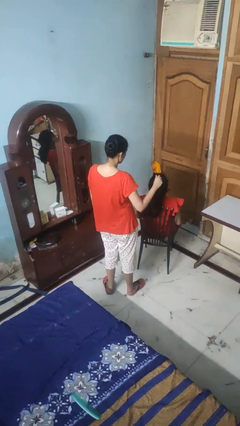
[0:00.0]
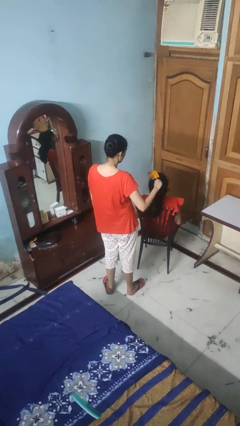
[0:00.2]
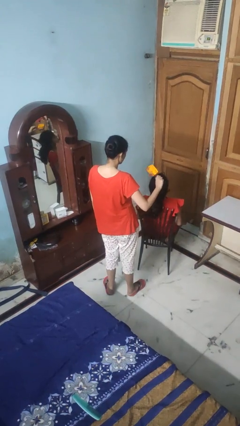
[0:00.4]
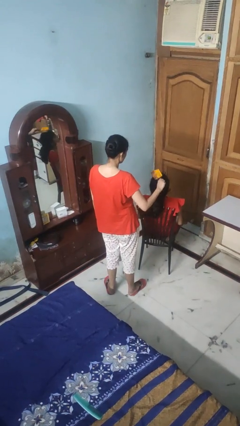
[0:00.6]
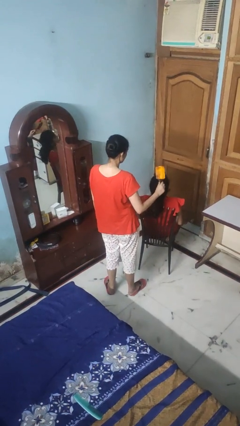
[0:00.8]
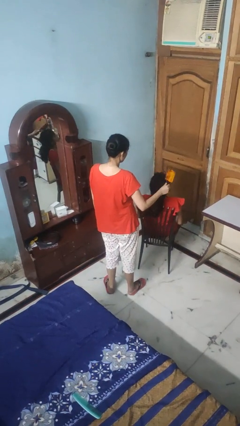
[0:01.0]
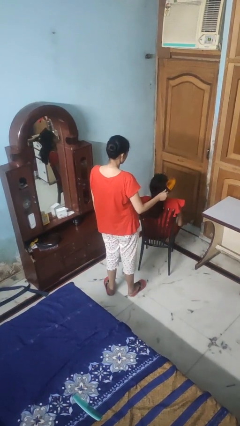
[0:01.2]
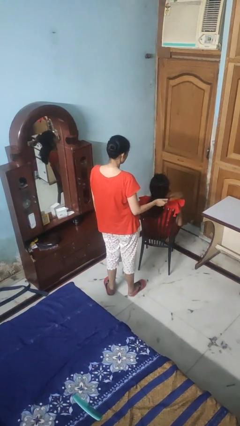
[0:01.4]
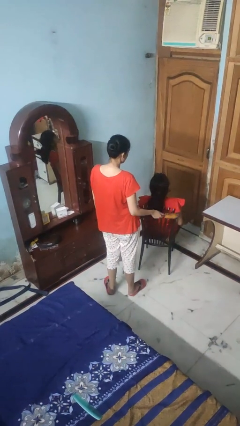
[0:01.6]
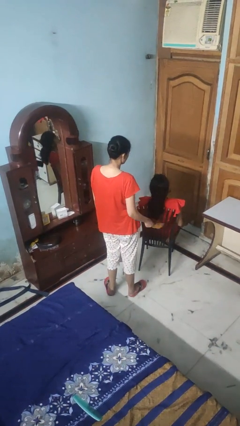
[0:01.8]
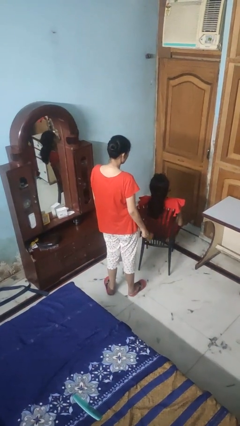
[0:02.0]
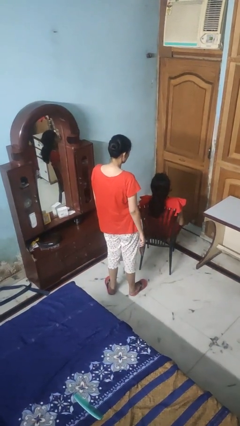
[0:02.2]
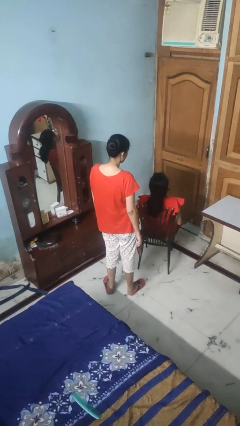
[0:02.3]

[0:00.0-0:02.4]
person brushes hair of person

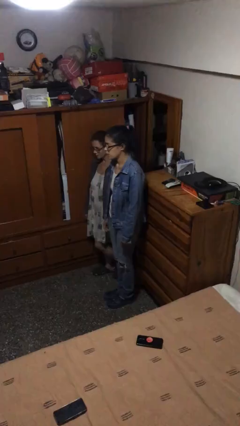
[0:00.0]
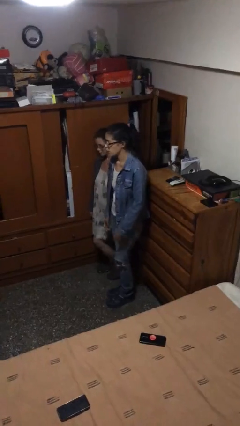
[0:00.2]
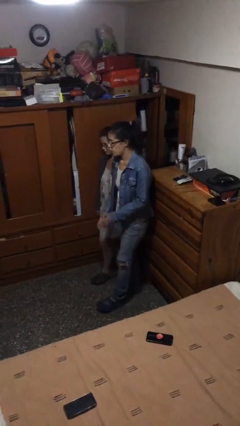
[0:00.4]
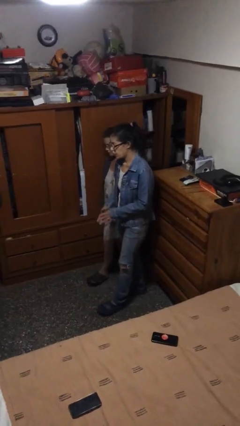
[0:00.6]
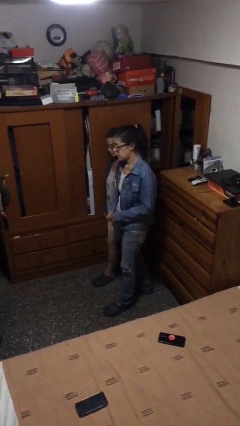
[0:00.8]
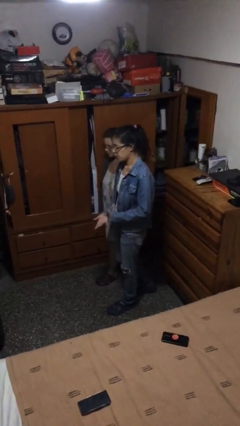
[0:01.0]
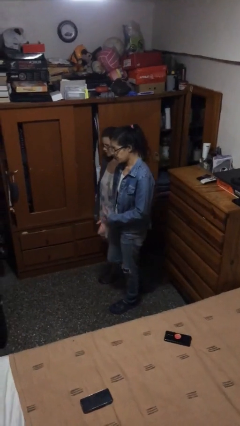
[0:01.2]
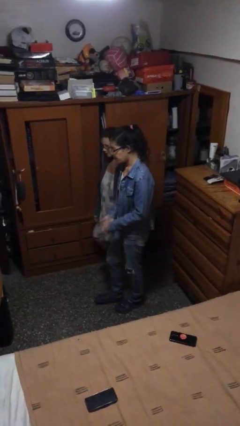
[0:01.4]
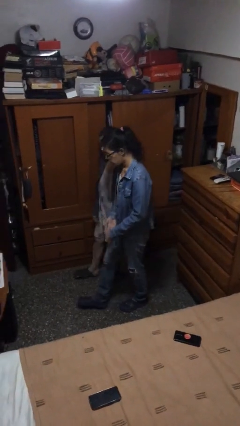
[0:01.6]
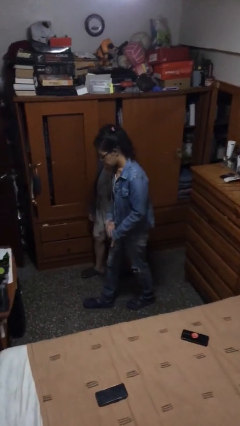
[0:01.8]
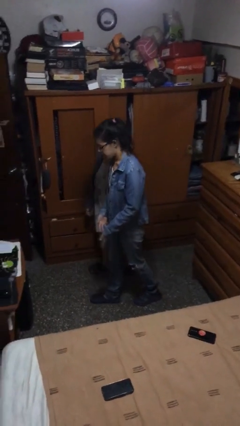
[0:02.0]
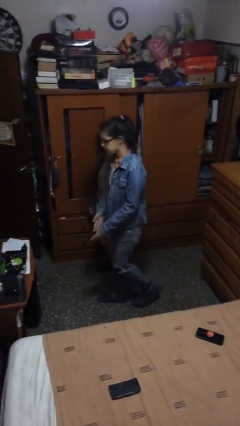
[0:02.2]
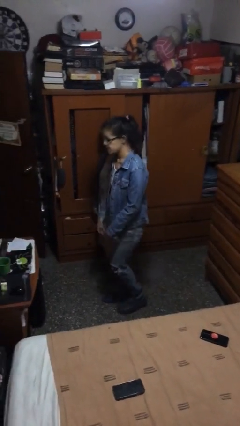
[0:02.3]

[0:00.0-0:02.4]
person talks to person

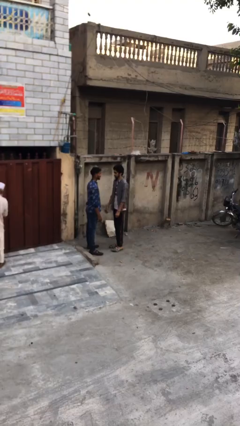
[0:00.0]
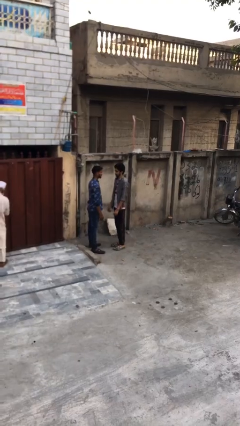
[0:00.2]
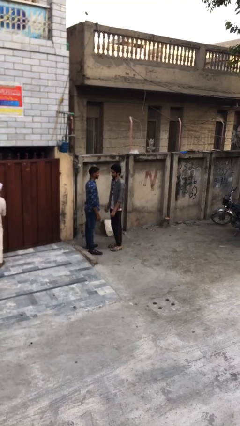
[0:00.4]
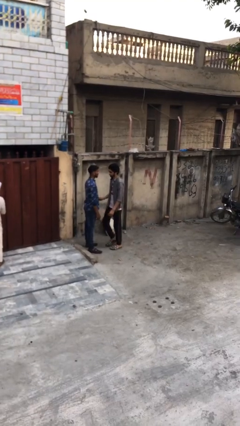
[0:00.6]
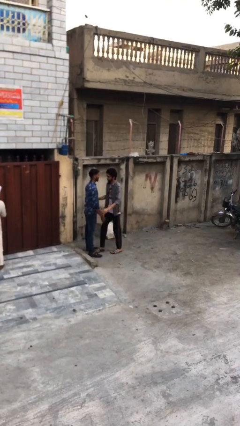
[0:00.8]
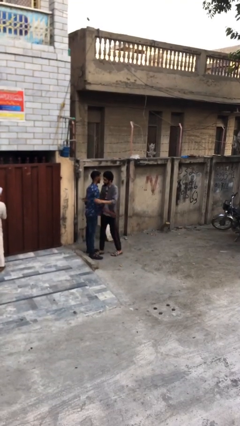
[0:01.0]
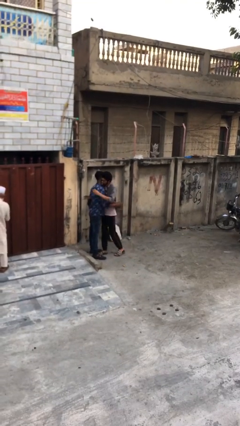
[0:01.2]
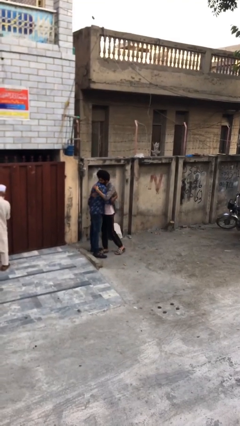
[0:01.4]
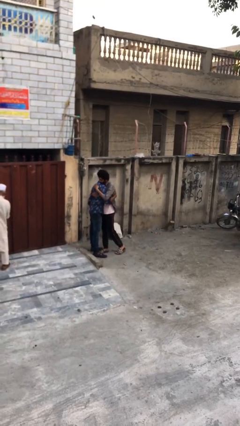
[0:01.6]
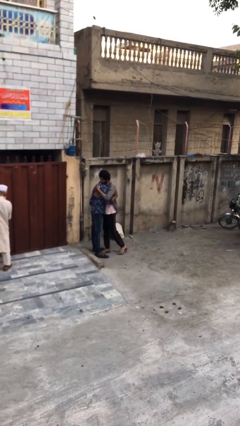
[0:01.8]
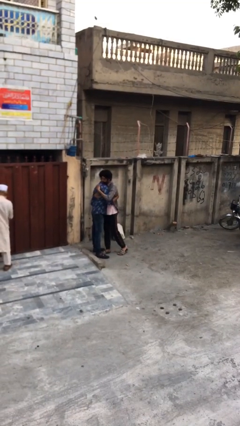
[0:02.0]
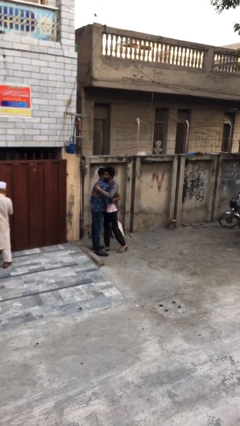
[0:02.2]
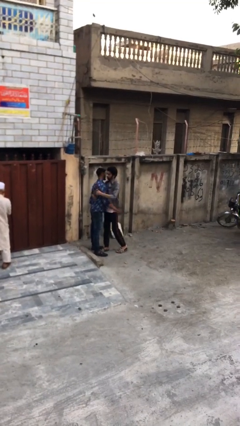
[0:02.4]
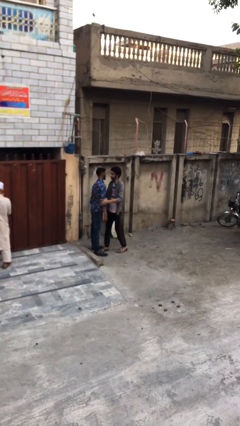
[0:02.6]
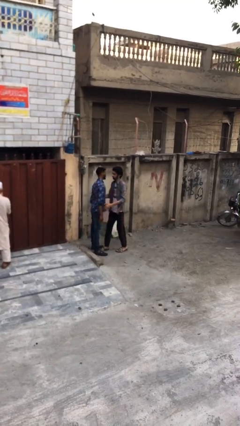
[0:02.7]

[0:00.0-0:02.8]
person embraces person

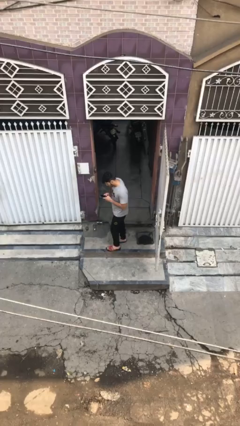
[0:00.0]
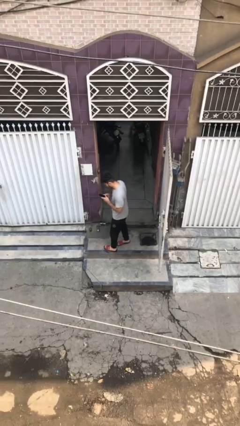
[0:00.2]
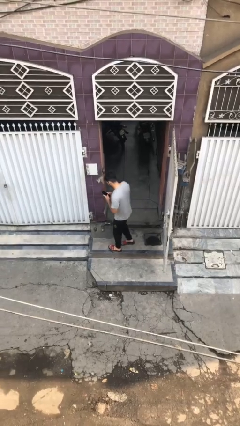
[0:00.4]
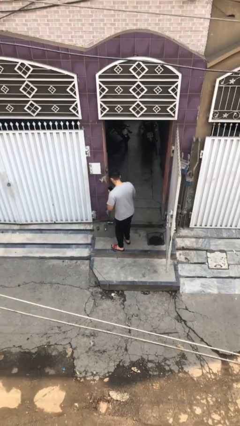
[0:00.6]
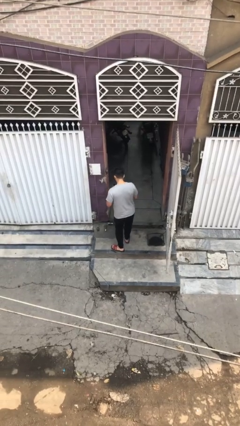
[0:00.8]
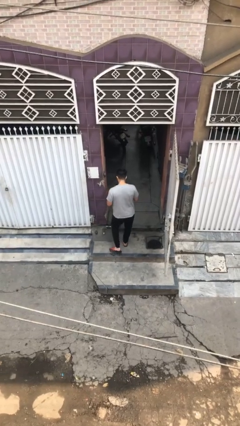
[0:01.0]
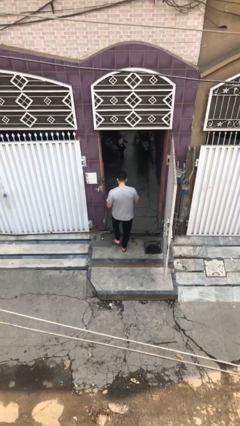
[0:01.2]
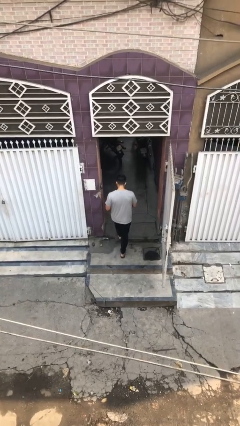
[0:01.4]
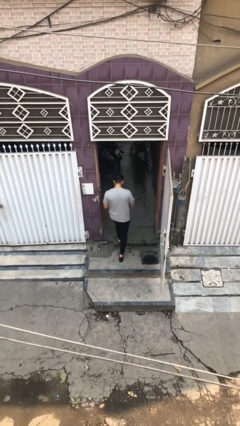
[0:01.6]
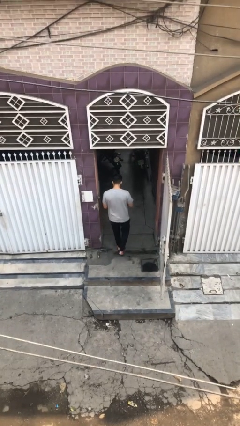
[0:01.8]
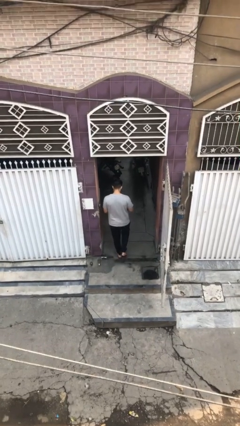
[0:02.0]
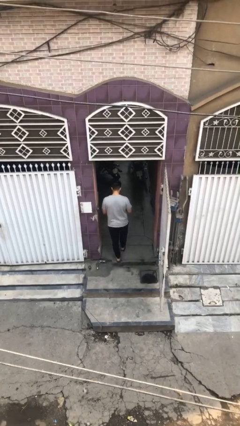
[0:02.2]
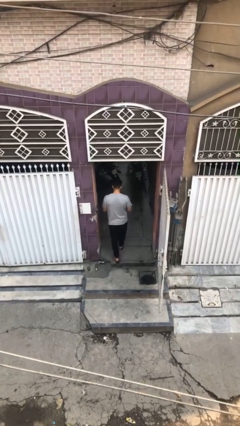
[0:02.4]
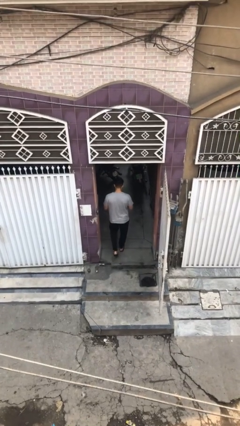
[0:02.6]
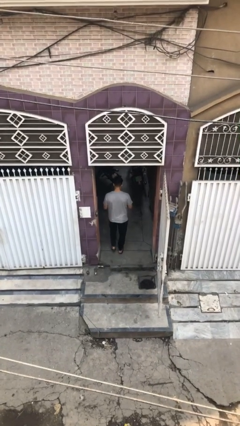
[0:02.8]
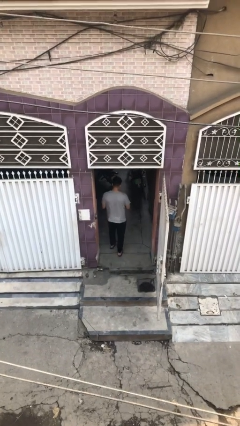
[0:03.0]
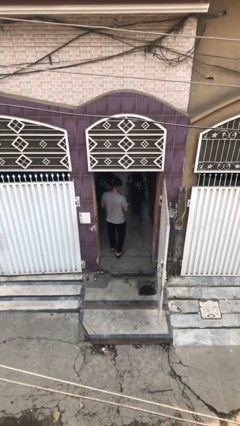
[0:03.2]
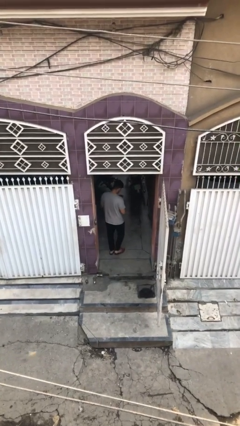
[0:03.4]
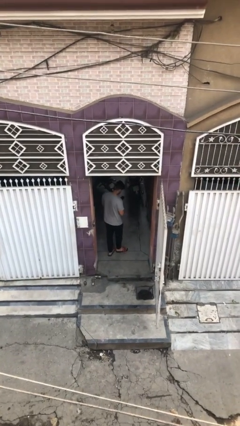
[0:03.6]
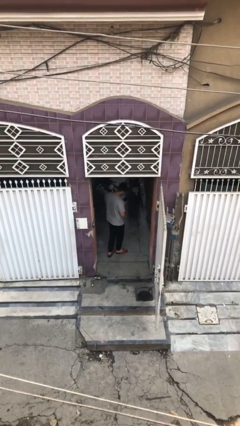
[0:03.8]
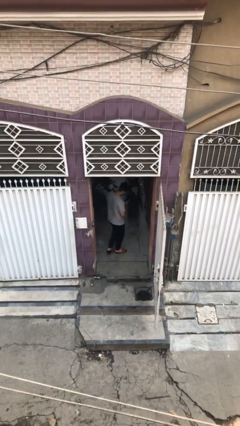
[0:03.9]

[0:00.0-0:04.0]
person exits scene through structure

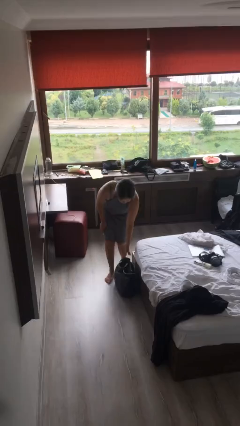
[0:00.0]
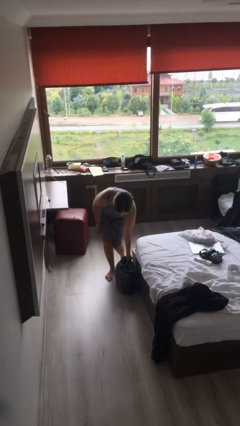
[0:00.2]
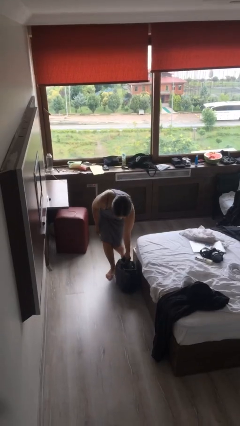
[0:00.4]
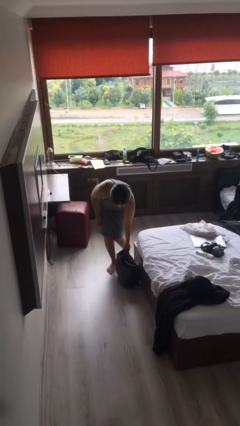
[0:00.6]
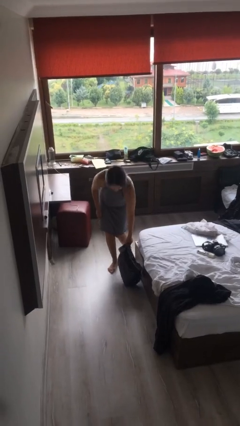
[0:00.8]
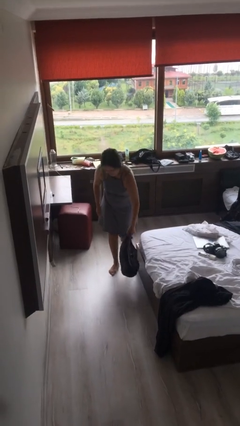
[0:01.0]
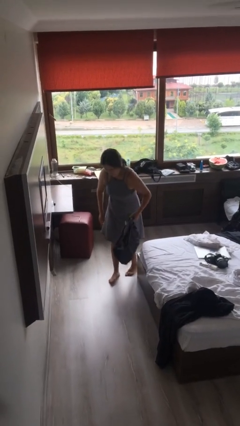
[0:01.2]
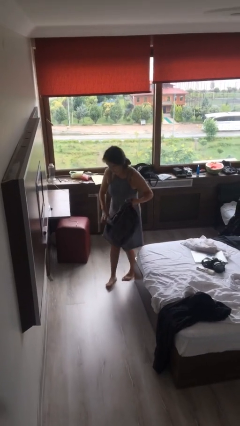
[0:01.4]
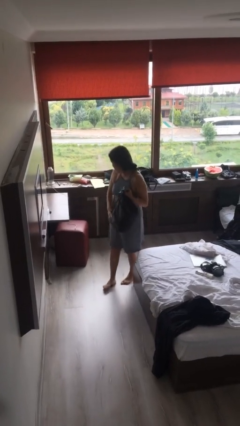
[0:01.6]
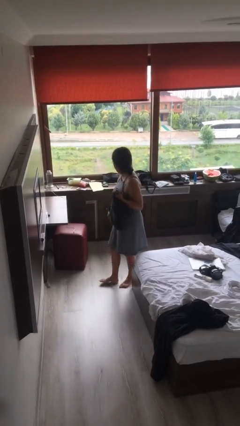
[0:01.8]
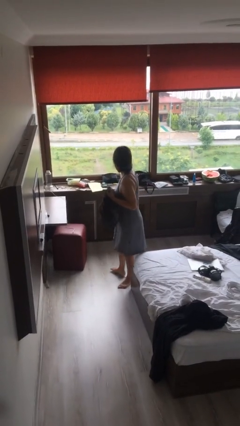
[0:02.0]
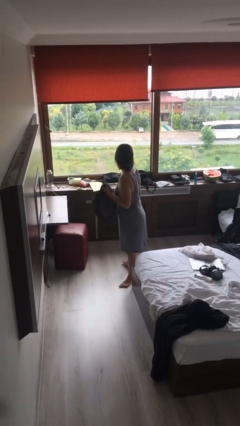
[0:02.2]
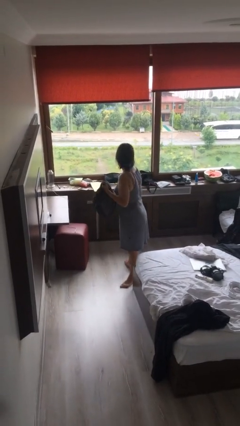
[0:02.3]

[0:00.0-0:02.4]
person picks up object from floor

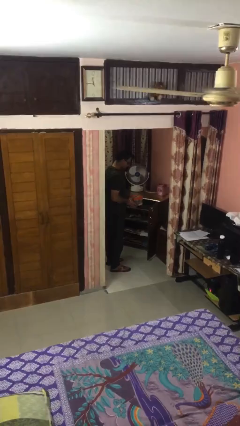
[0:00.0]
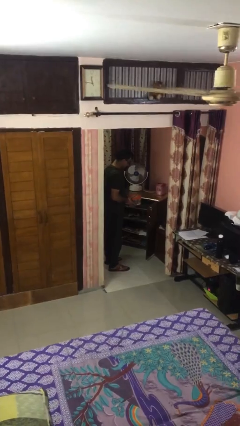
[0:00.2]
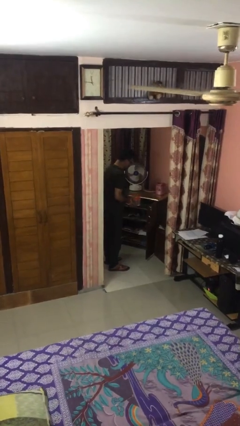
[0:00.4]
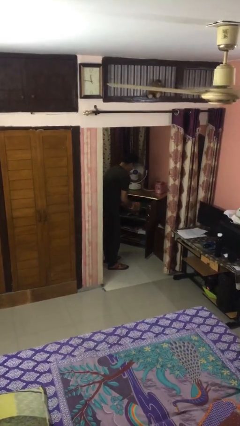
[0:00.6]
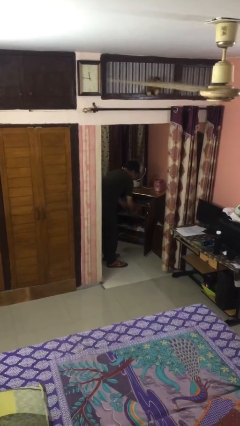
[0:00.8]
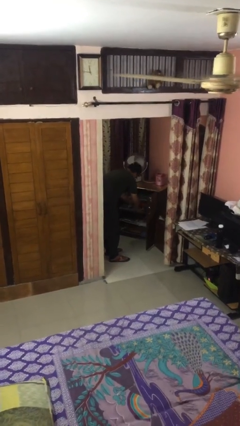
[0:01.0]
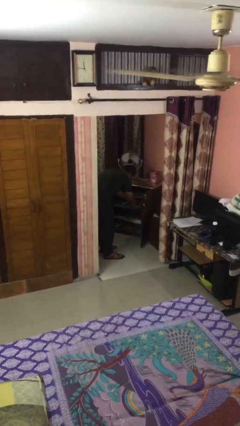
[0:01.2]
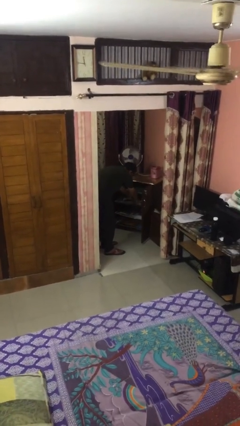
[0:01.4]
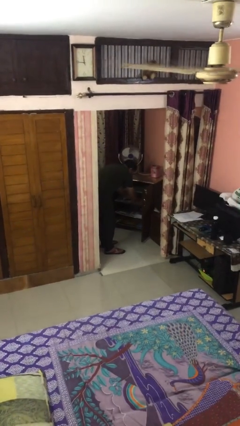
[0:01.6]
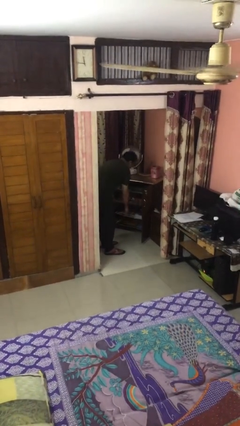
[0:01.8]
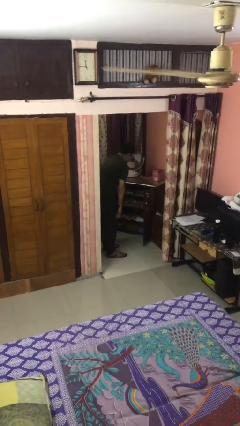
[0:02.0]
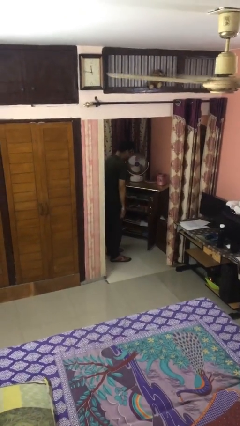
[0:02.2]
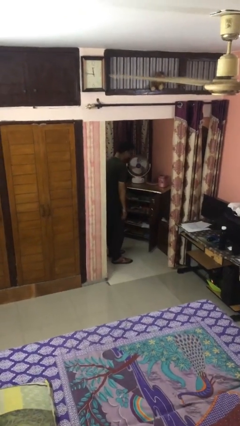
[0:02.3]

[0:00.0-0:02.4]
person puts down object into cabinet

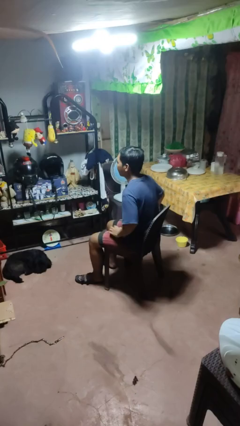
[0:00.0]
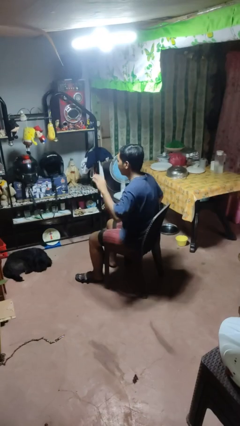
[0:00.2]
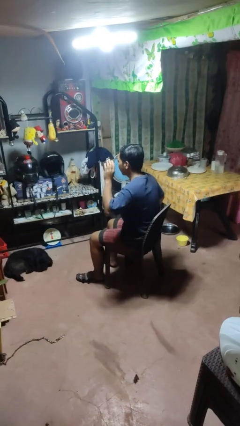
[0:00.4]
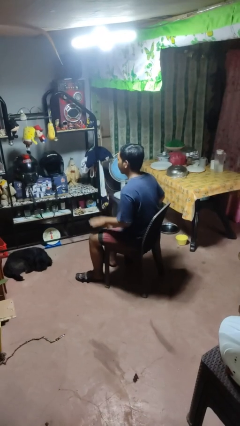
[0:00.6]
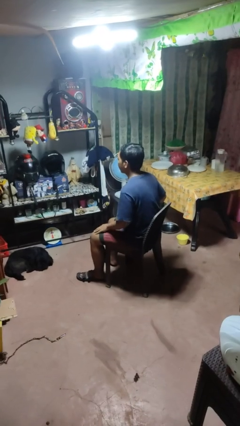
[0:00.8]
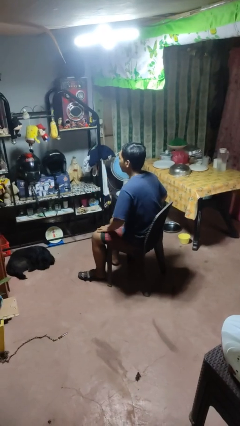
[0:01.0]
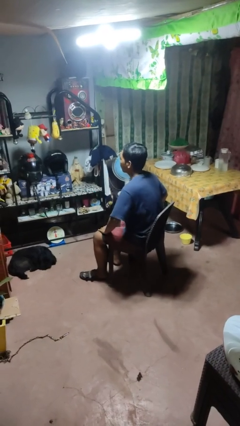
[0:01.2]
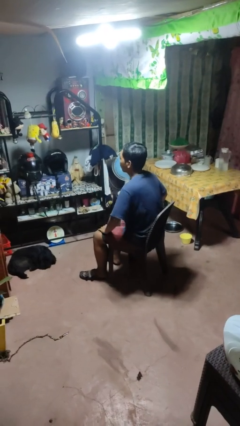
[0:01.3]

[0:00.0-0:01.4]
person slaps hands on thighs
